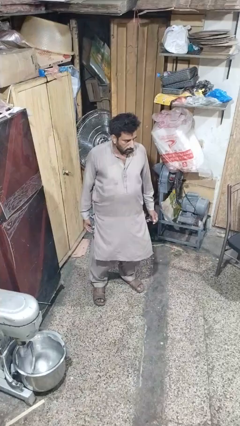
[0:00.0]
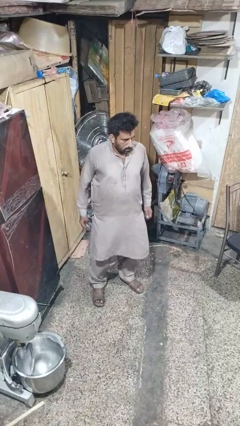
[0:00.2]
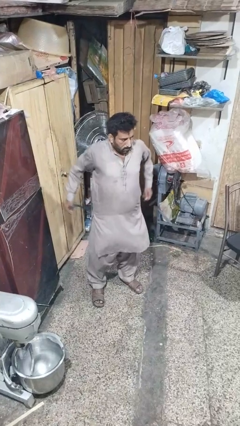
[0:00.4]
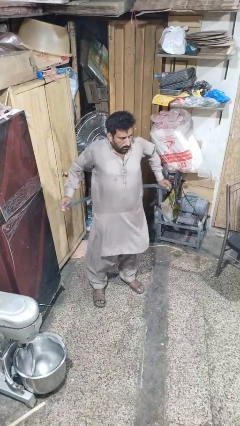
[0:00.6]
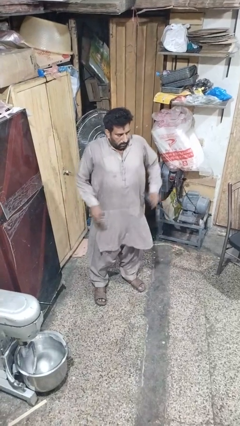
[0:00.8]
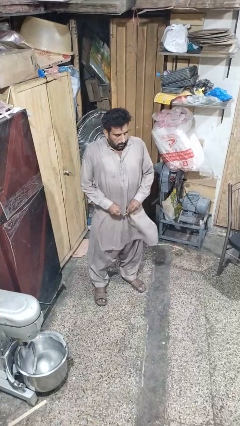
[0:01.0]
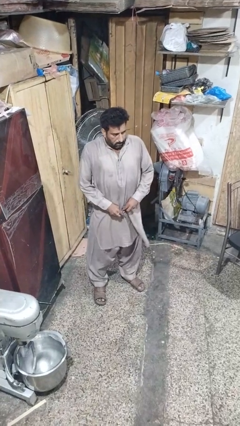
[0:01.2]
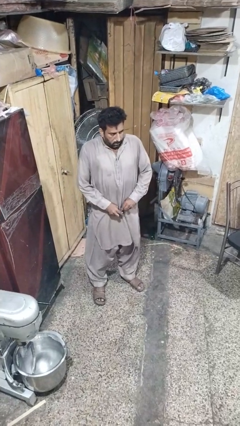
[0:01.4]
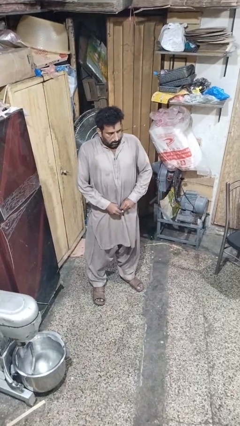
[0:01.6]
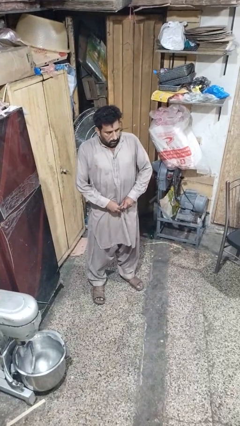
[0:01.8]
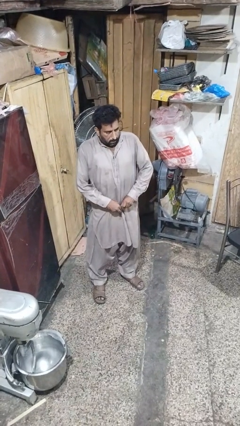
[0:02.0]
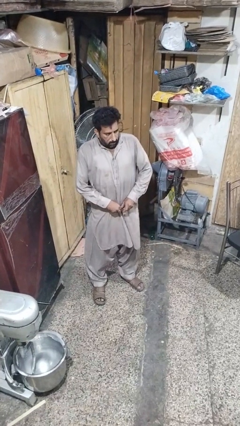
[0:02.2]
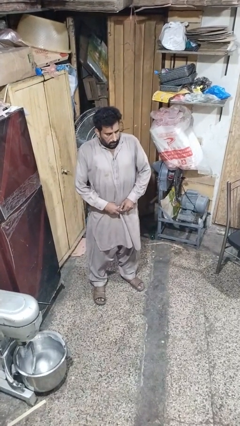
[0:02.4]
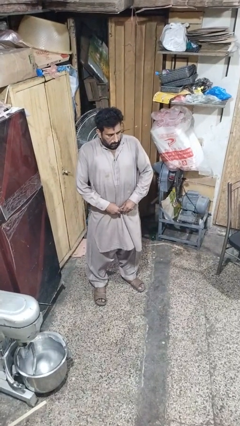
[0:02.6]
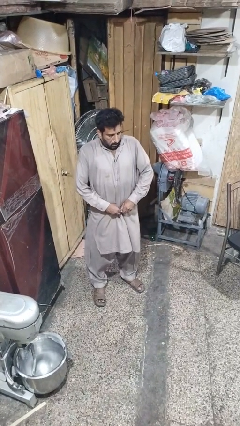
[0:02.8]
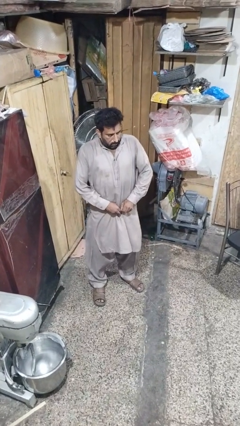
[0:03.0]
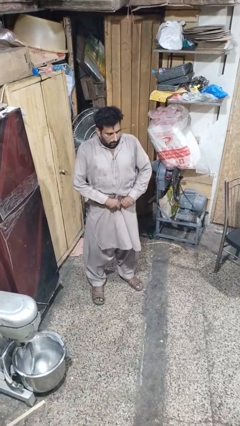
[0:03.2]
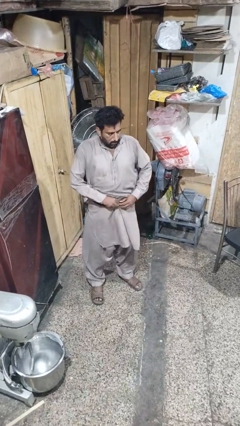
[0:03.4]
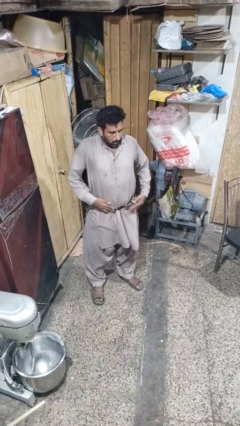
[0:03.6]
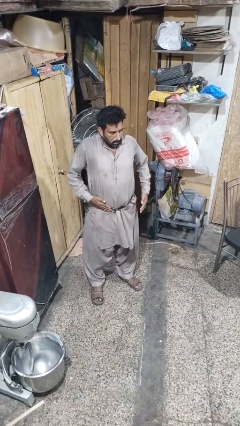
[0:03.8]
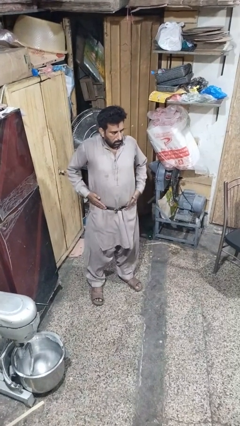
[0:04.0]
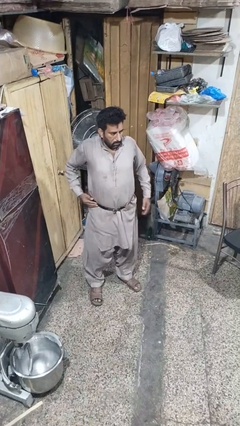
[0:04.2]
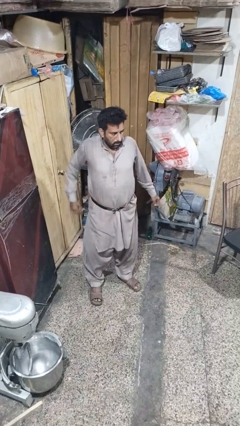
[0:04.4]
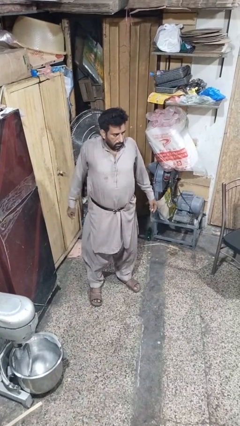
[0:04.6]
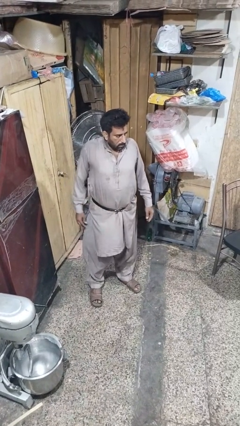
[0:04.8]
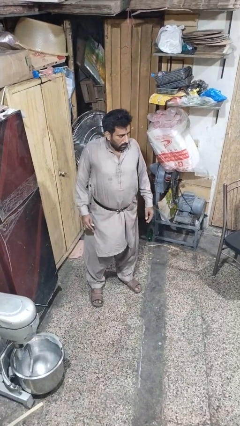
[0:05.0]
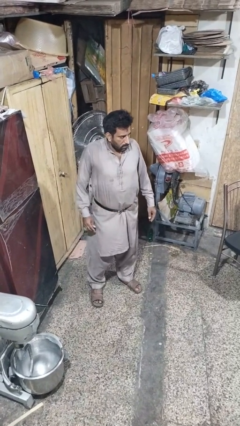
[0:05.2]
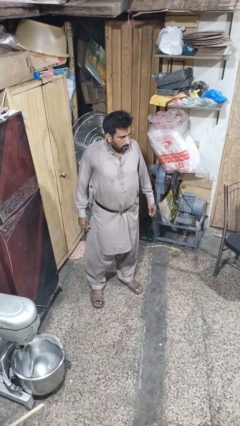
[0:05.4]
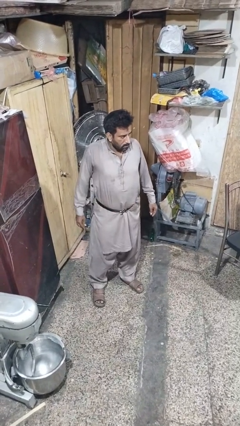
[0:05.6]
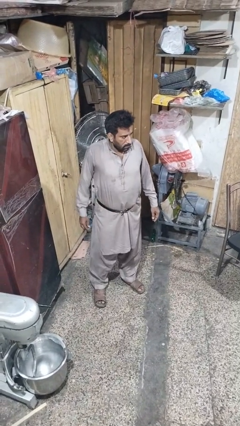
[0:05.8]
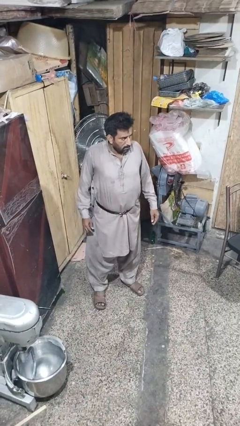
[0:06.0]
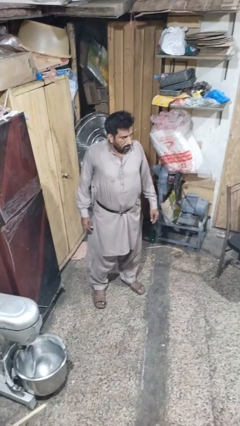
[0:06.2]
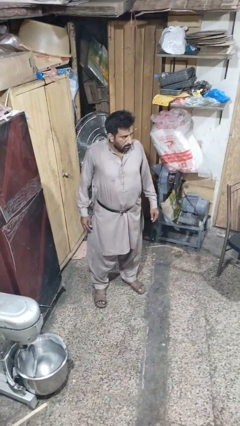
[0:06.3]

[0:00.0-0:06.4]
person puts on belt

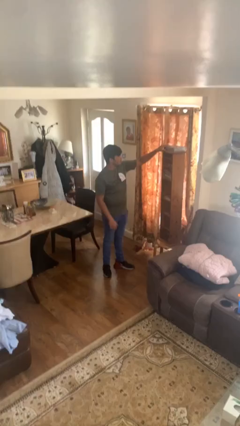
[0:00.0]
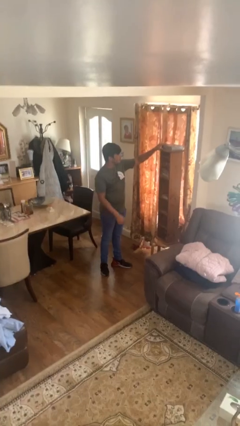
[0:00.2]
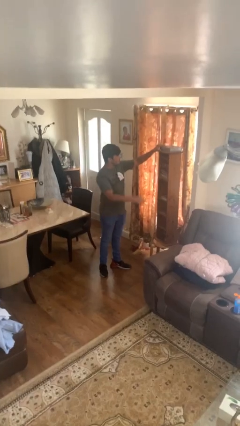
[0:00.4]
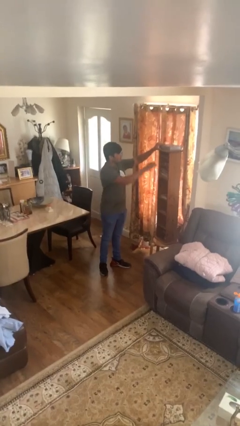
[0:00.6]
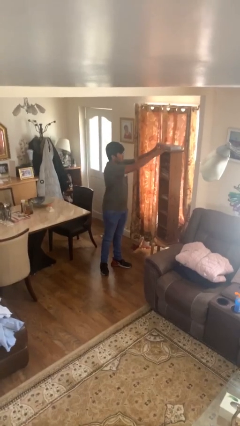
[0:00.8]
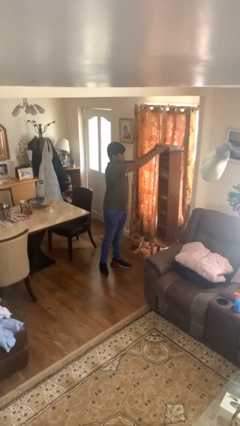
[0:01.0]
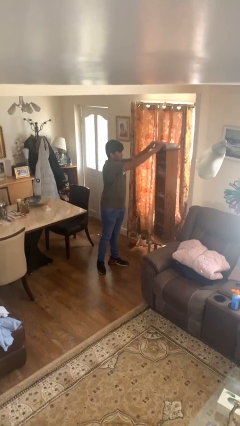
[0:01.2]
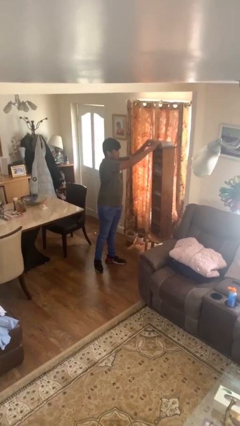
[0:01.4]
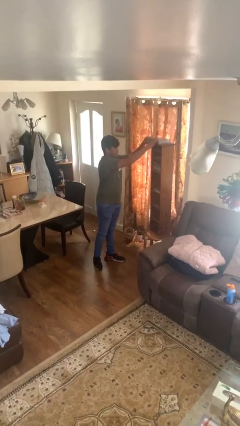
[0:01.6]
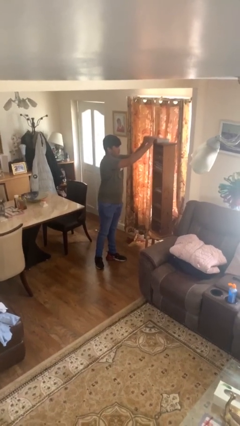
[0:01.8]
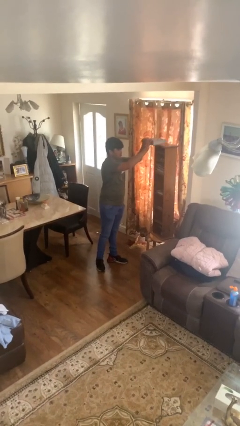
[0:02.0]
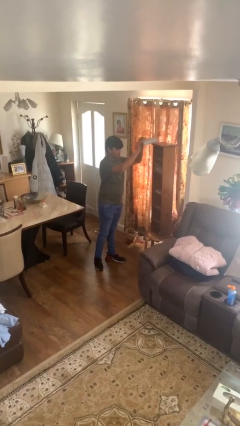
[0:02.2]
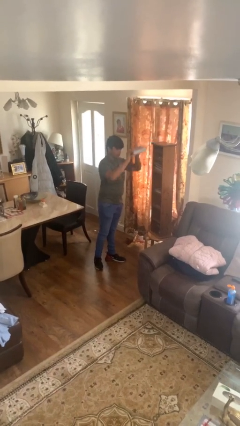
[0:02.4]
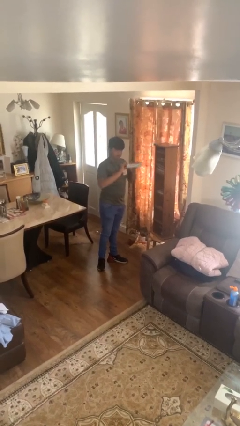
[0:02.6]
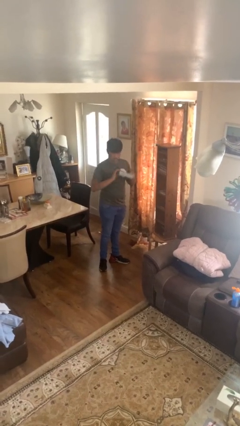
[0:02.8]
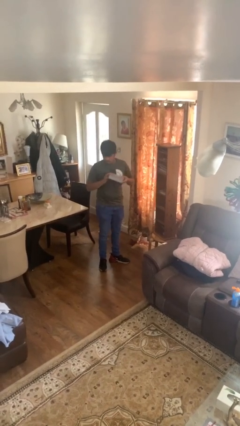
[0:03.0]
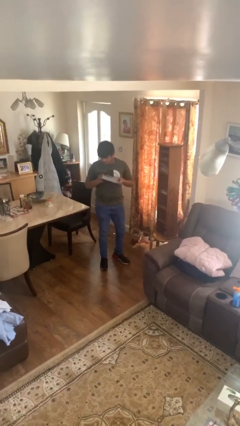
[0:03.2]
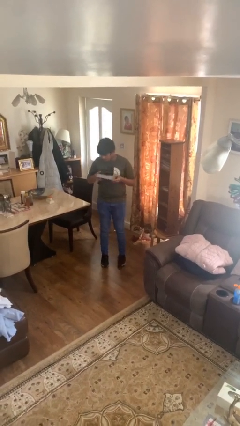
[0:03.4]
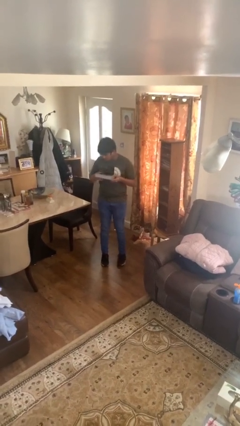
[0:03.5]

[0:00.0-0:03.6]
person picks up object from shelf

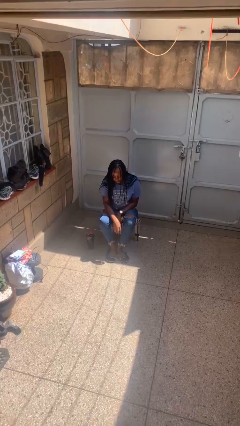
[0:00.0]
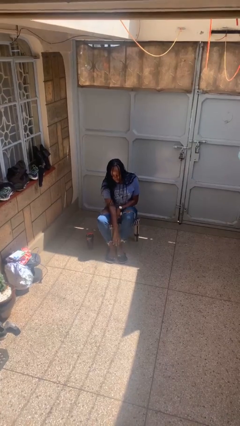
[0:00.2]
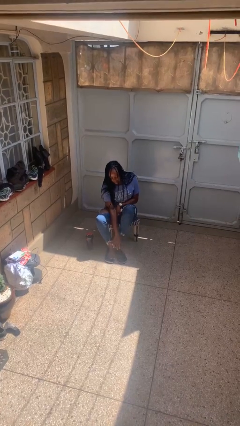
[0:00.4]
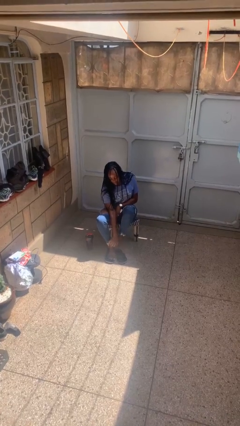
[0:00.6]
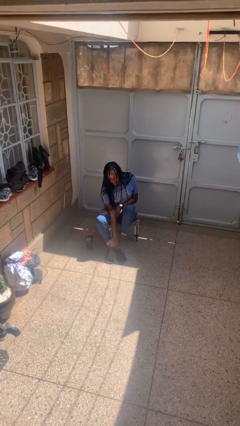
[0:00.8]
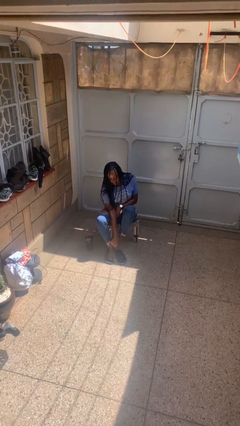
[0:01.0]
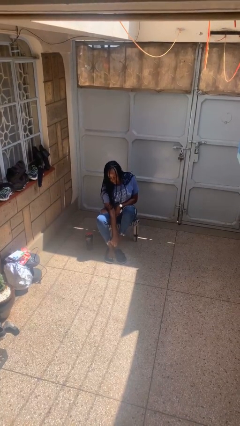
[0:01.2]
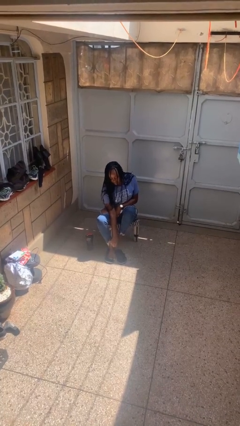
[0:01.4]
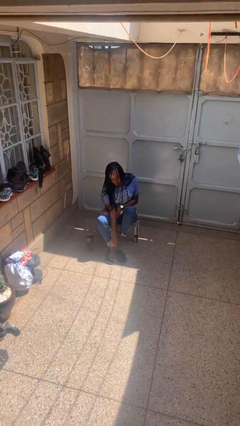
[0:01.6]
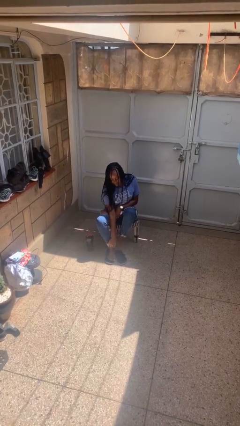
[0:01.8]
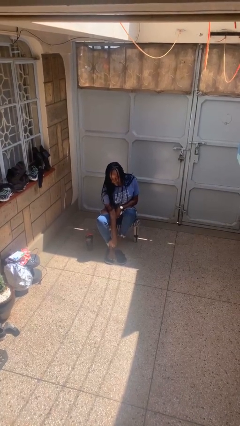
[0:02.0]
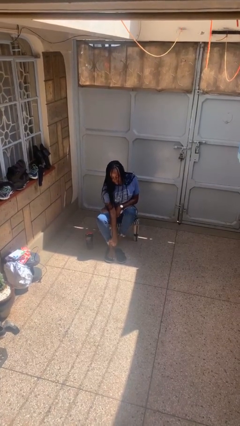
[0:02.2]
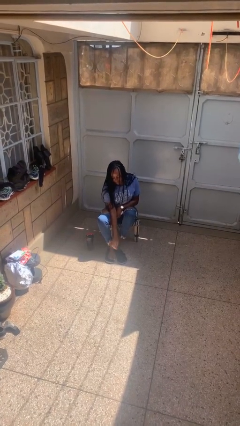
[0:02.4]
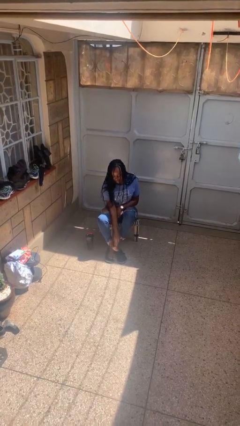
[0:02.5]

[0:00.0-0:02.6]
person rubs foot
